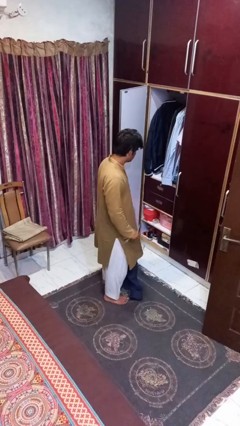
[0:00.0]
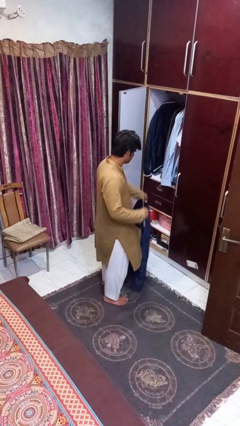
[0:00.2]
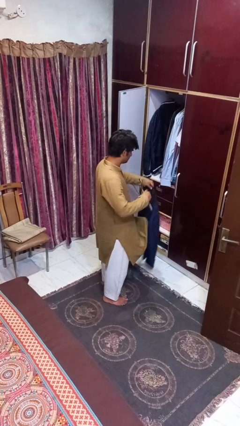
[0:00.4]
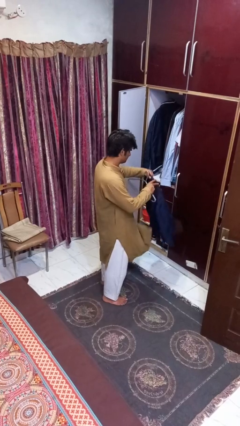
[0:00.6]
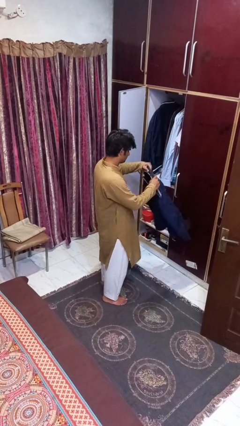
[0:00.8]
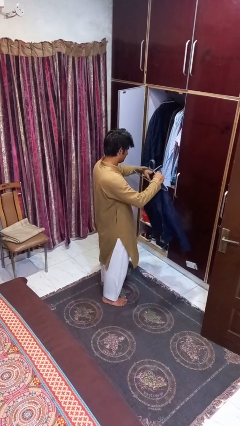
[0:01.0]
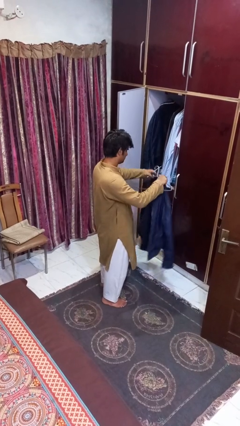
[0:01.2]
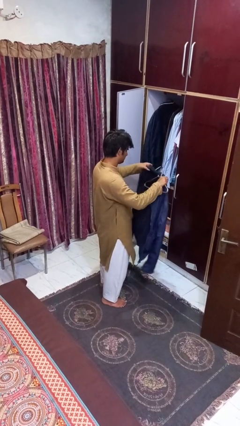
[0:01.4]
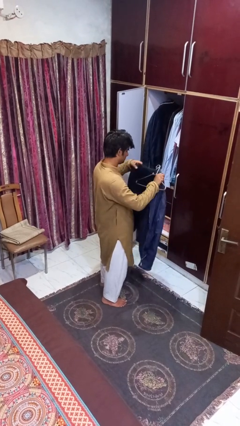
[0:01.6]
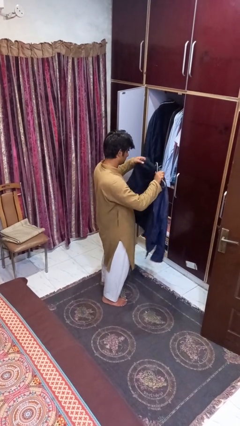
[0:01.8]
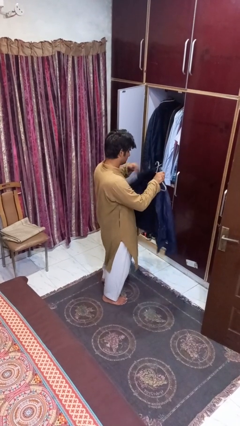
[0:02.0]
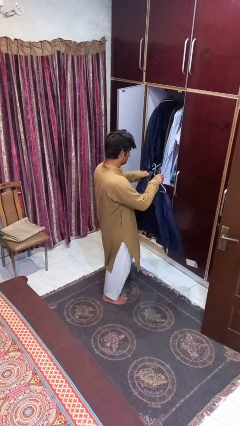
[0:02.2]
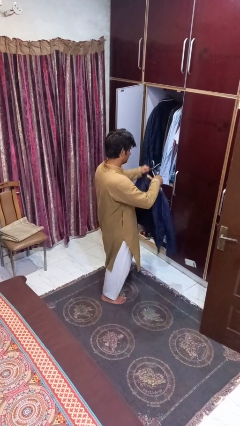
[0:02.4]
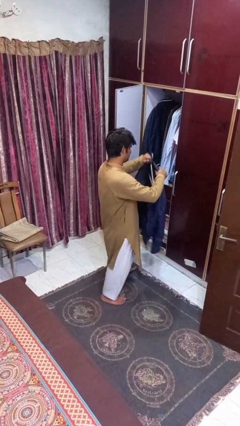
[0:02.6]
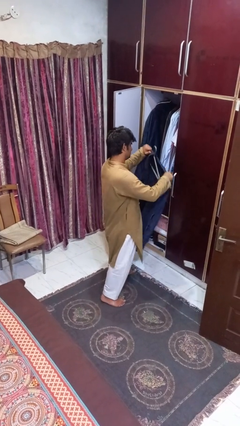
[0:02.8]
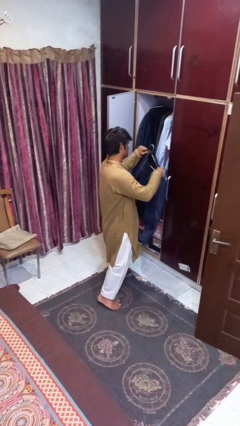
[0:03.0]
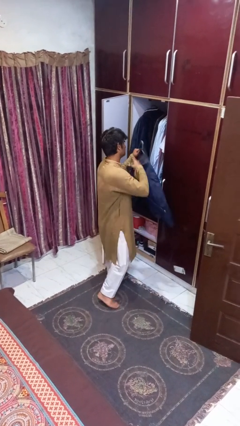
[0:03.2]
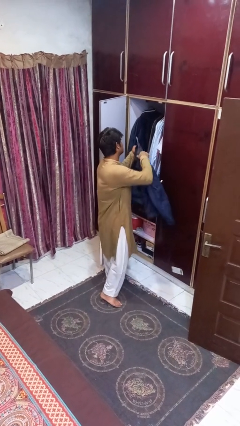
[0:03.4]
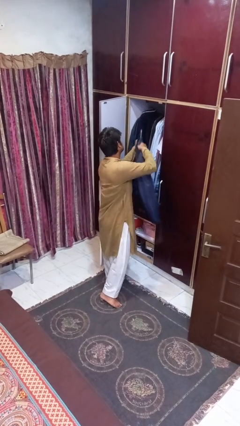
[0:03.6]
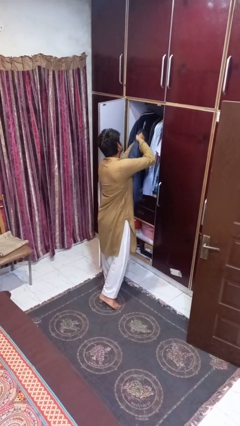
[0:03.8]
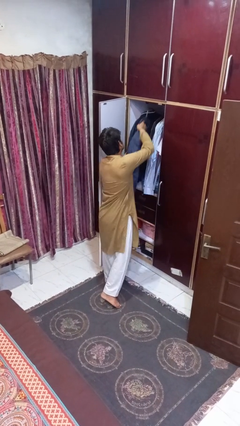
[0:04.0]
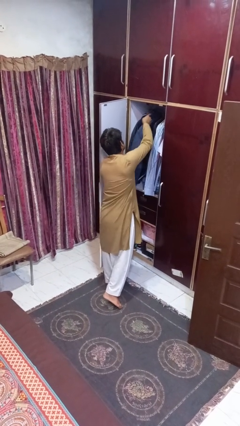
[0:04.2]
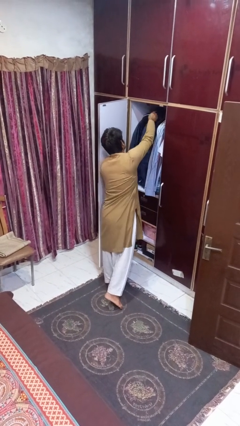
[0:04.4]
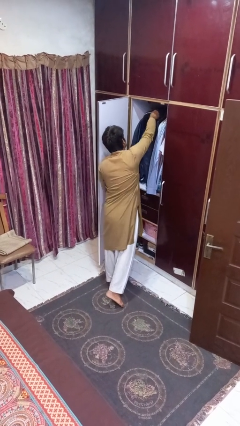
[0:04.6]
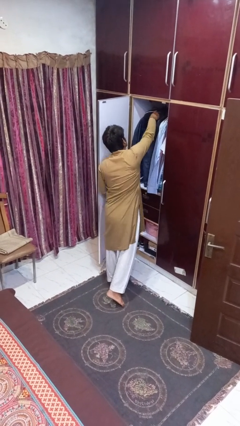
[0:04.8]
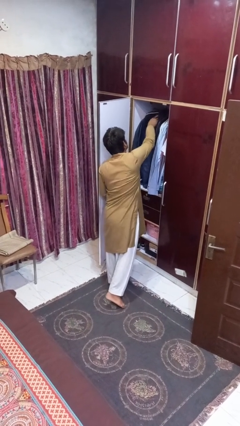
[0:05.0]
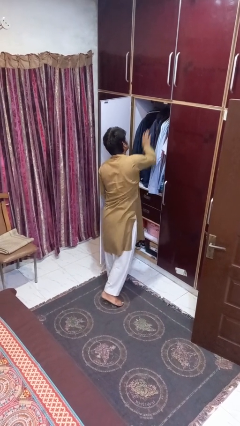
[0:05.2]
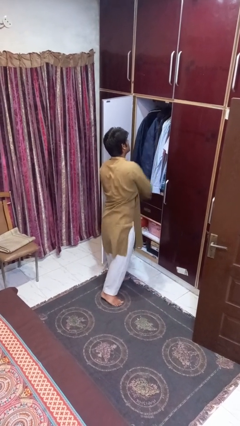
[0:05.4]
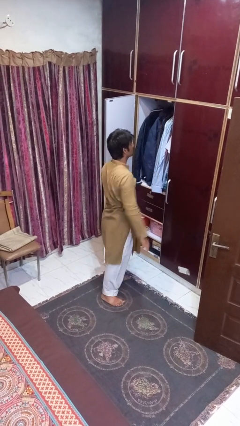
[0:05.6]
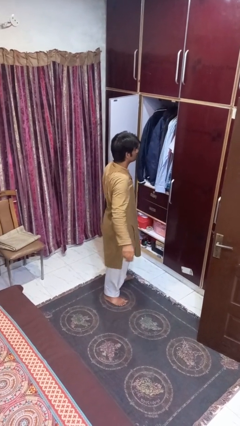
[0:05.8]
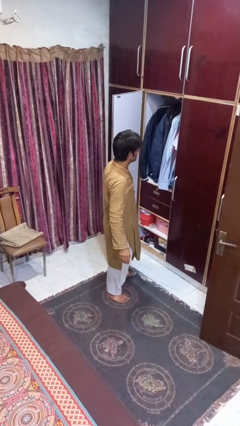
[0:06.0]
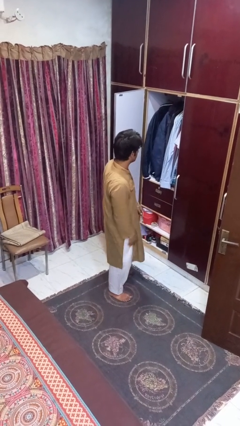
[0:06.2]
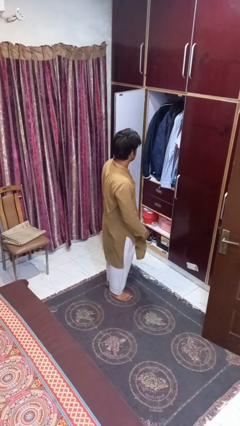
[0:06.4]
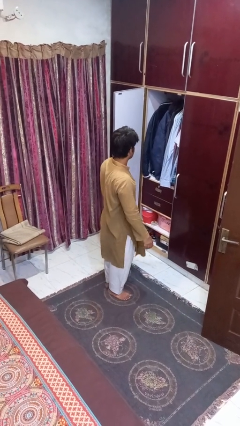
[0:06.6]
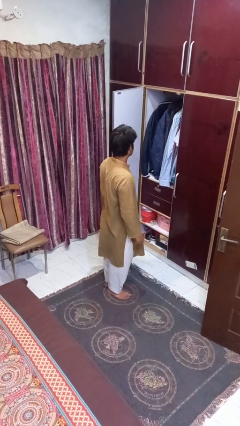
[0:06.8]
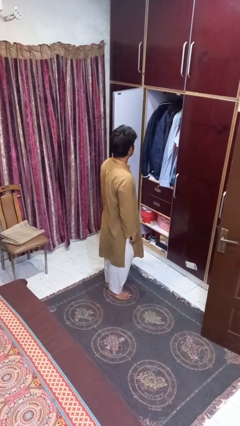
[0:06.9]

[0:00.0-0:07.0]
person puts clothes into closet

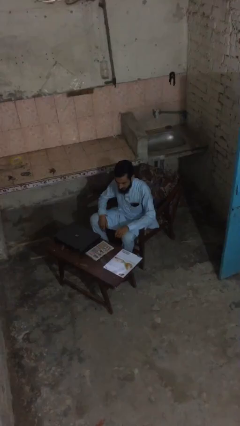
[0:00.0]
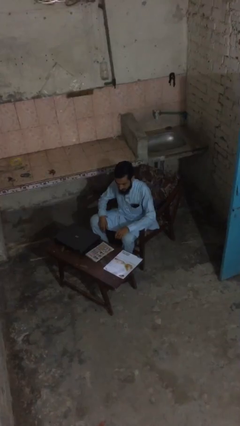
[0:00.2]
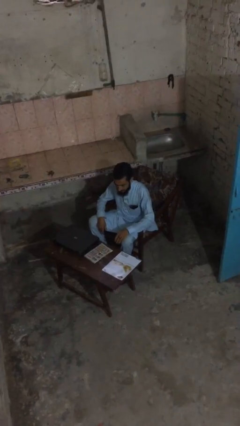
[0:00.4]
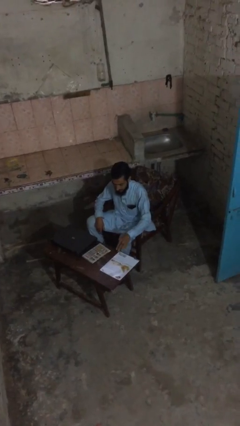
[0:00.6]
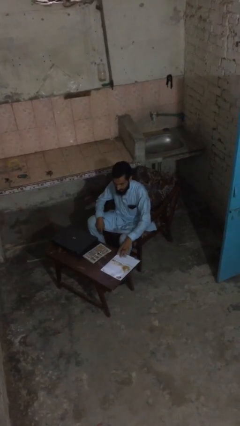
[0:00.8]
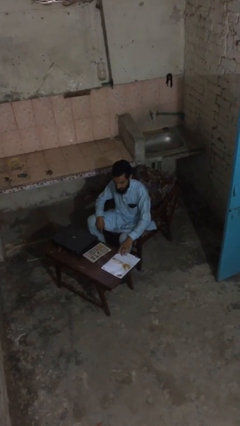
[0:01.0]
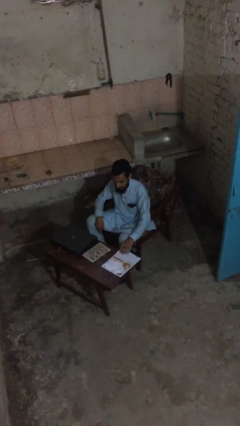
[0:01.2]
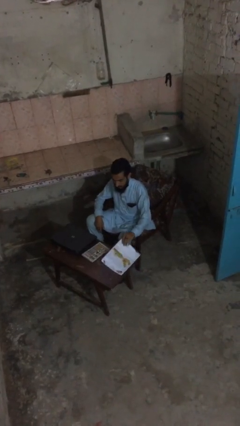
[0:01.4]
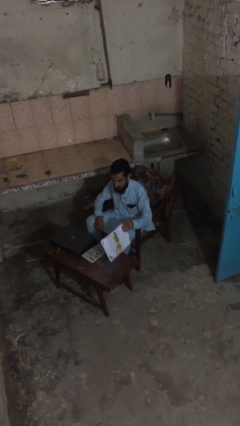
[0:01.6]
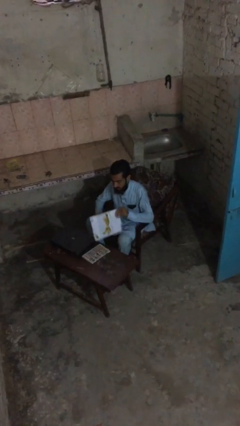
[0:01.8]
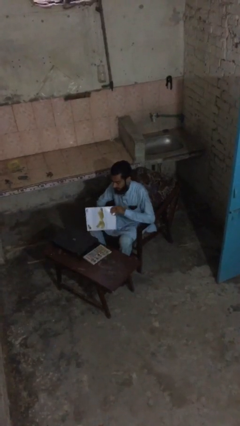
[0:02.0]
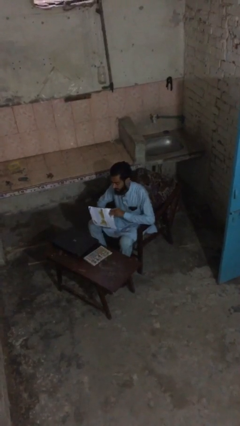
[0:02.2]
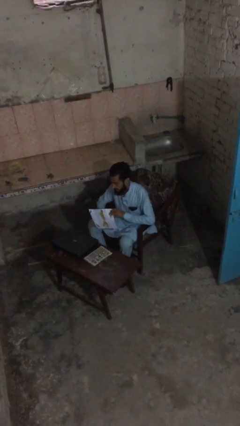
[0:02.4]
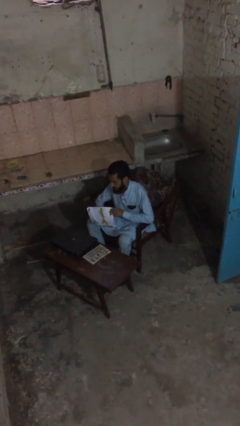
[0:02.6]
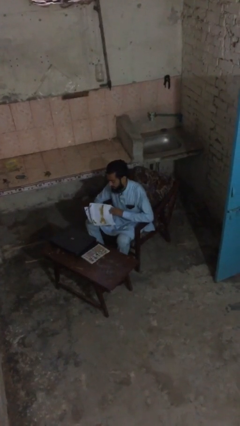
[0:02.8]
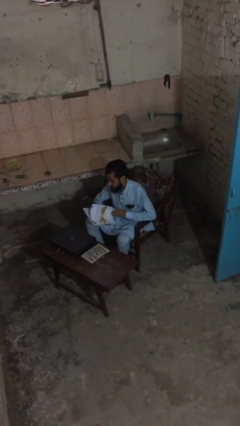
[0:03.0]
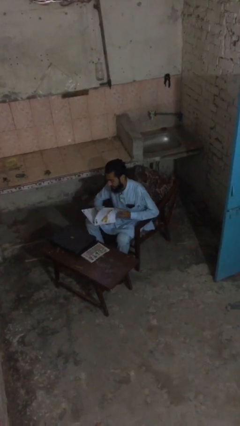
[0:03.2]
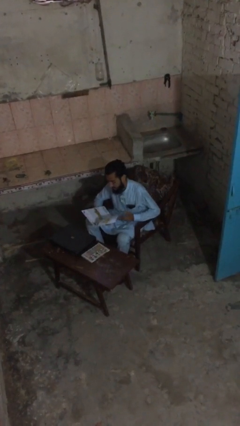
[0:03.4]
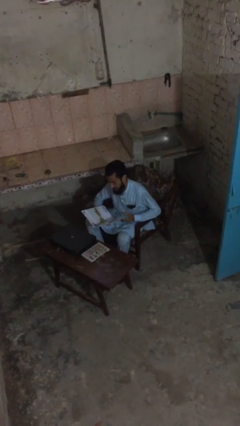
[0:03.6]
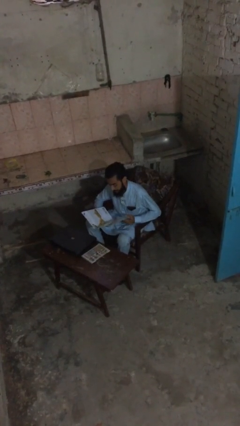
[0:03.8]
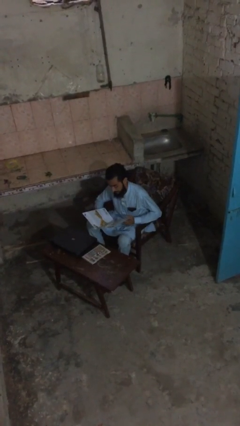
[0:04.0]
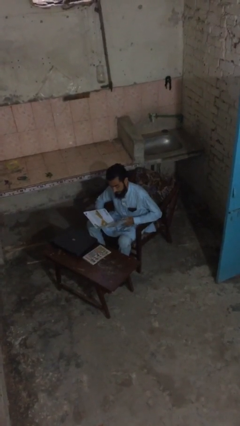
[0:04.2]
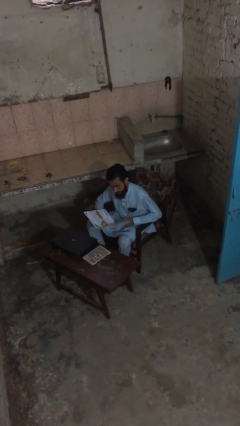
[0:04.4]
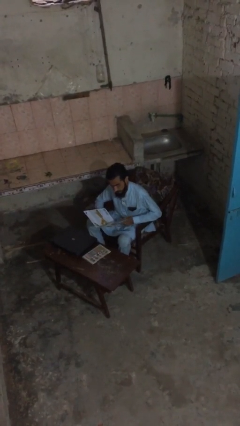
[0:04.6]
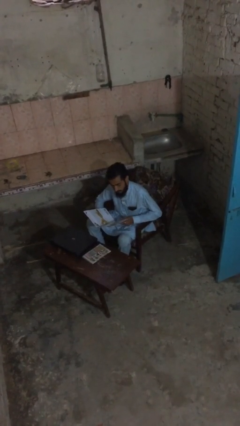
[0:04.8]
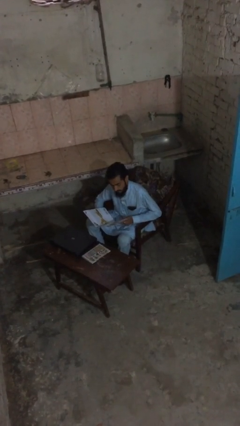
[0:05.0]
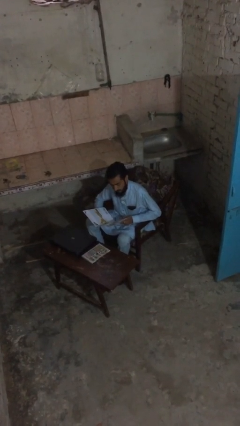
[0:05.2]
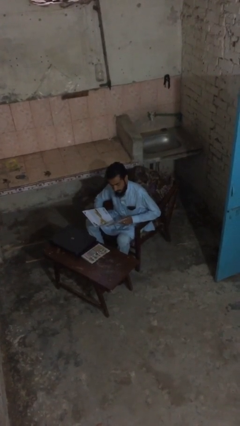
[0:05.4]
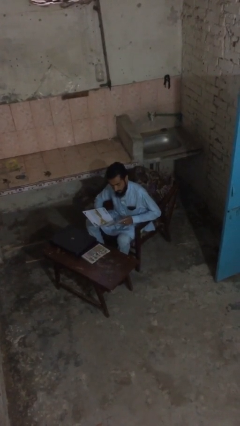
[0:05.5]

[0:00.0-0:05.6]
person reads document

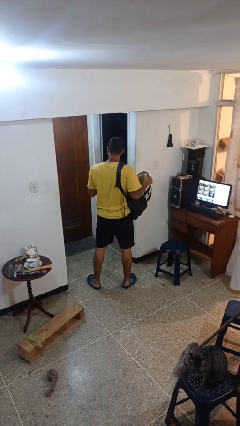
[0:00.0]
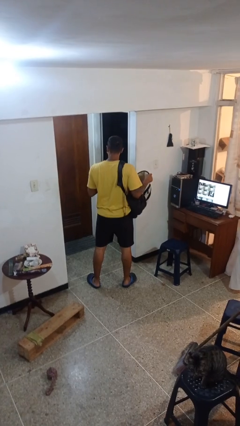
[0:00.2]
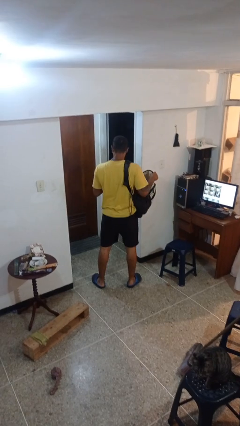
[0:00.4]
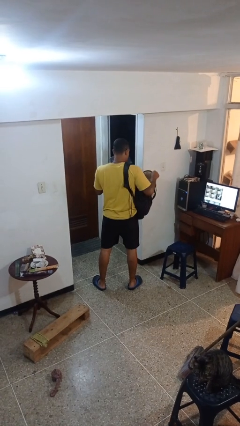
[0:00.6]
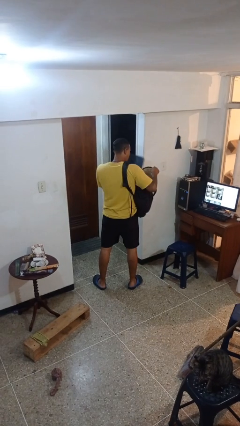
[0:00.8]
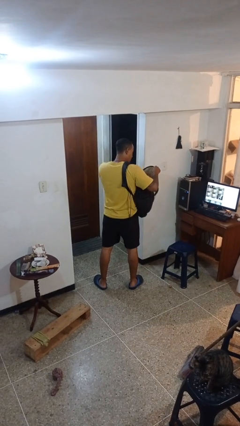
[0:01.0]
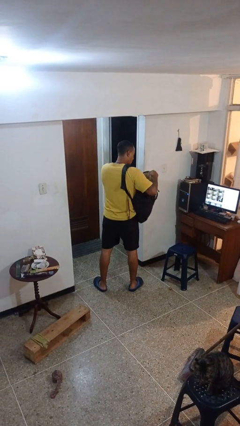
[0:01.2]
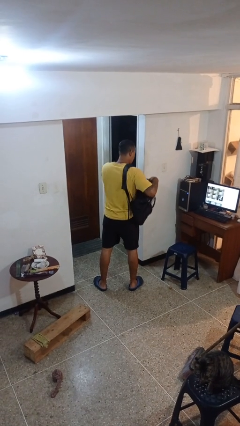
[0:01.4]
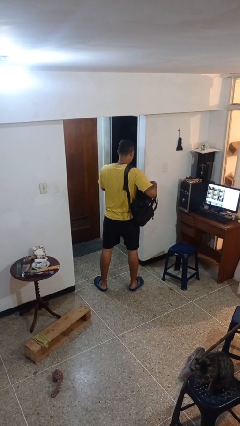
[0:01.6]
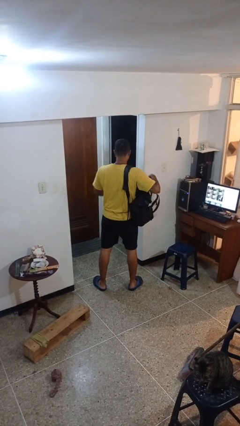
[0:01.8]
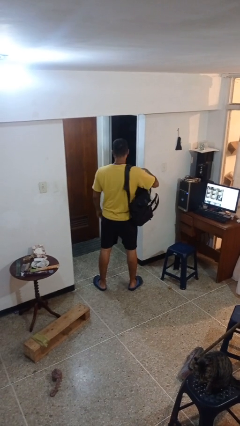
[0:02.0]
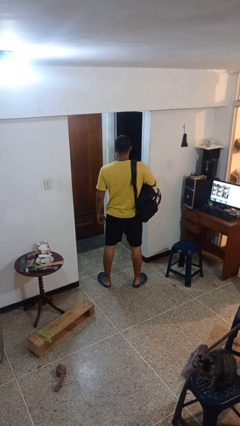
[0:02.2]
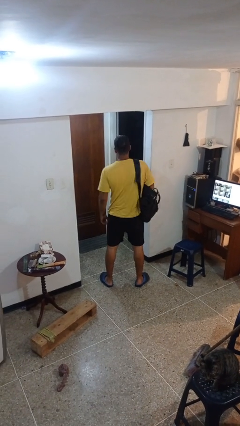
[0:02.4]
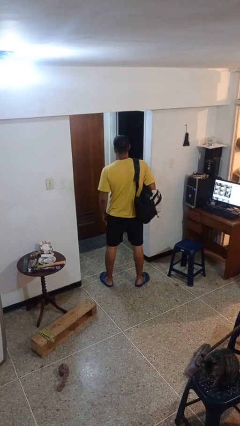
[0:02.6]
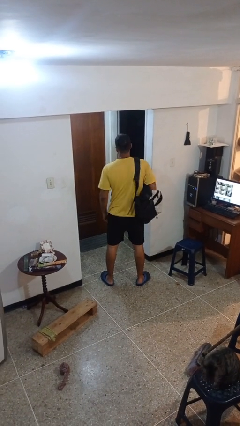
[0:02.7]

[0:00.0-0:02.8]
person puts object into backpack

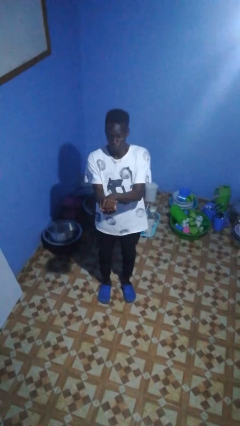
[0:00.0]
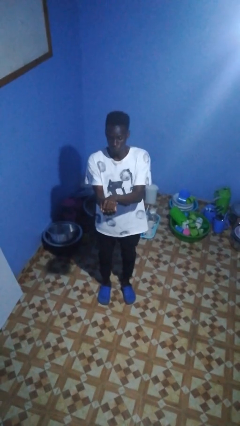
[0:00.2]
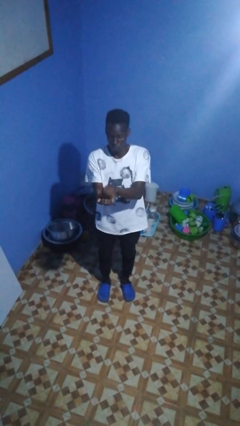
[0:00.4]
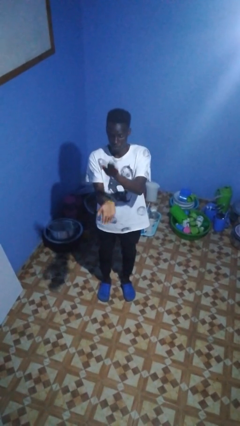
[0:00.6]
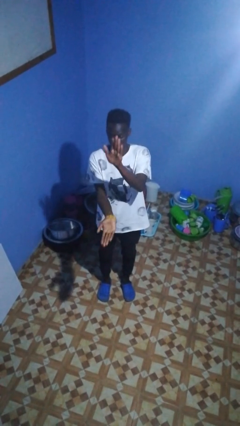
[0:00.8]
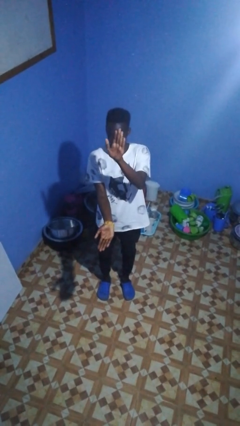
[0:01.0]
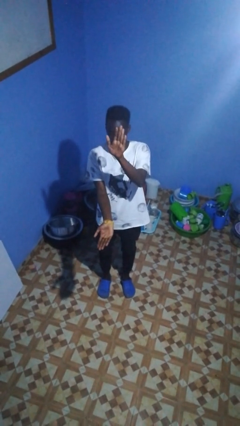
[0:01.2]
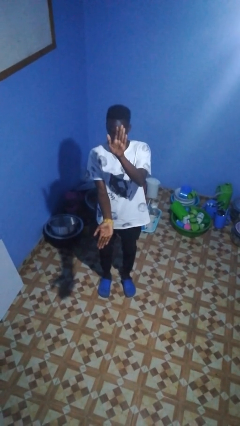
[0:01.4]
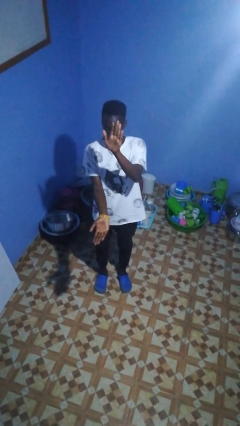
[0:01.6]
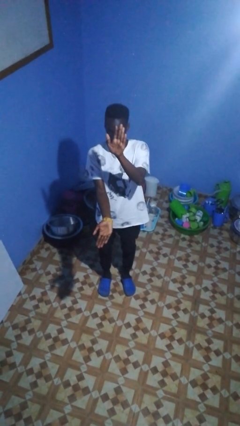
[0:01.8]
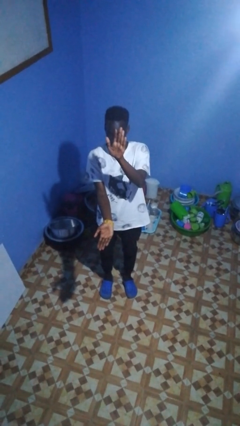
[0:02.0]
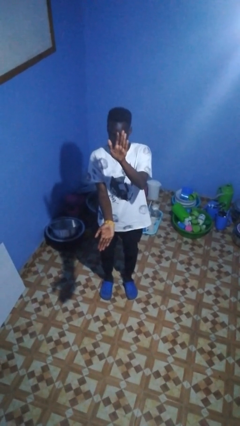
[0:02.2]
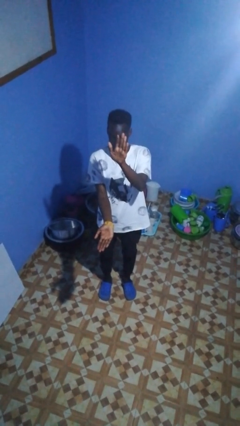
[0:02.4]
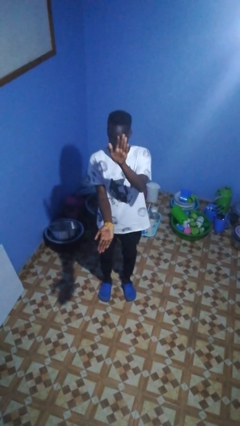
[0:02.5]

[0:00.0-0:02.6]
person gestures zoom in
